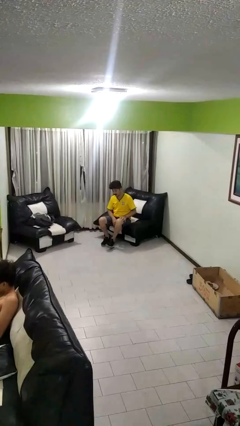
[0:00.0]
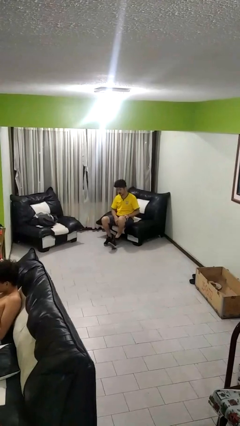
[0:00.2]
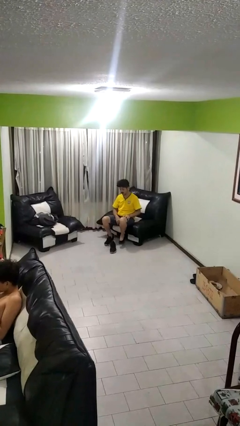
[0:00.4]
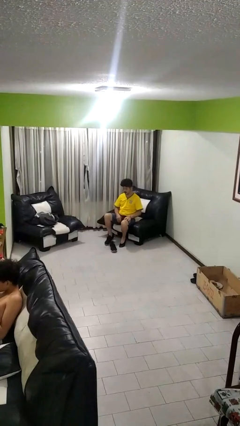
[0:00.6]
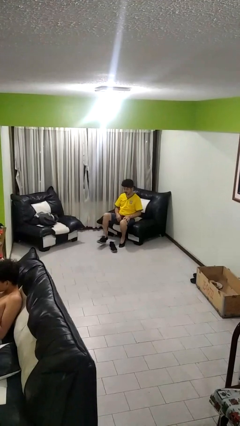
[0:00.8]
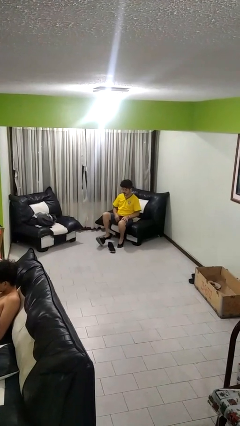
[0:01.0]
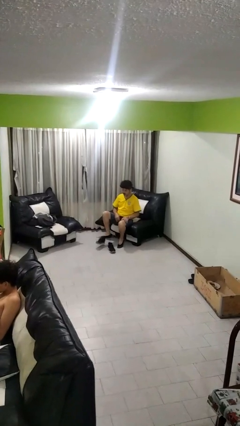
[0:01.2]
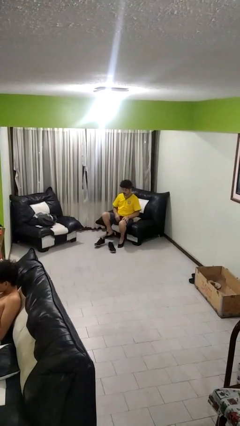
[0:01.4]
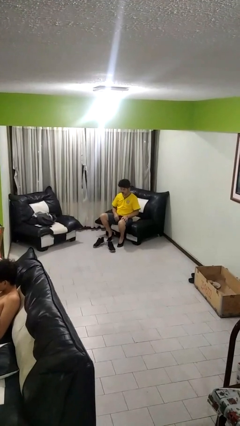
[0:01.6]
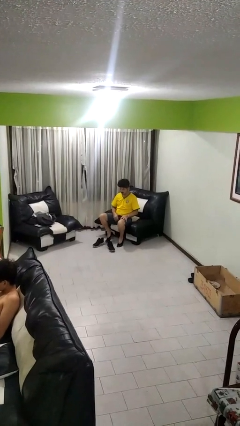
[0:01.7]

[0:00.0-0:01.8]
person takes off shoes

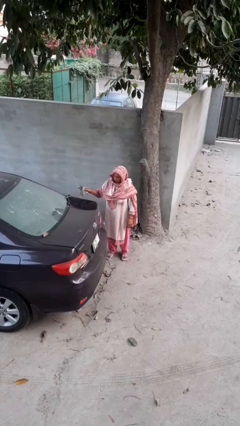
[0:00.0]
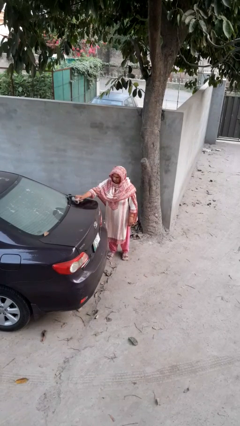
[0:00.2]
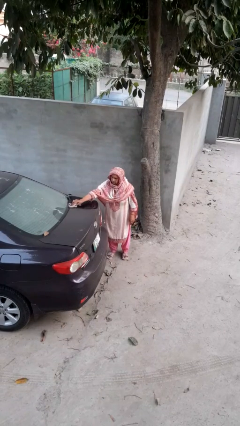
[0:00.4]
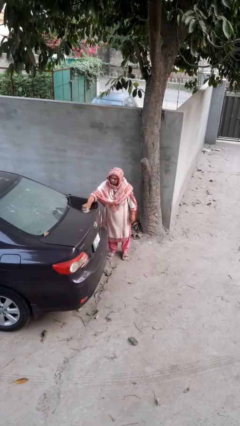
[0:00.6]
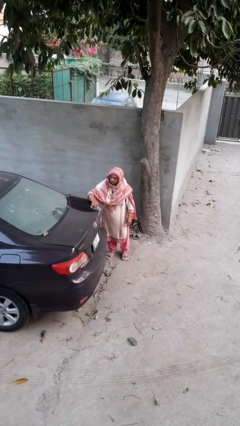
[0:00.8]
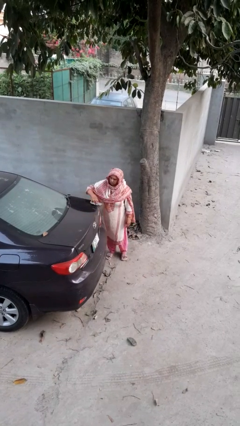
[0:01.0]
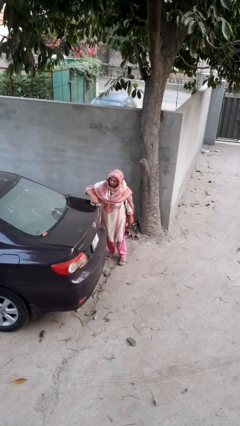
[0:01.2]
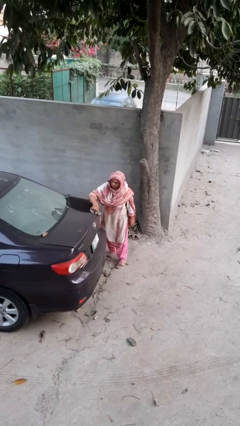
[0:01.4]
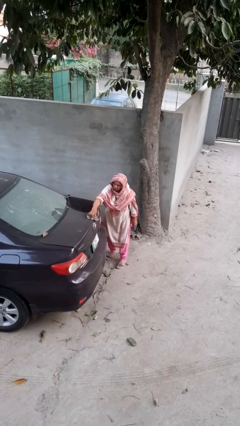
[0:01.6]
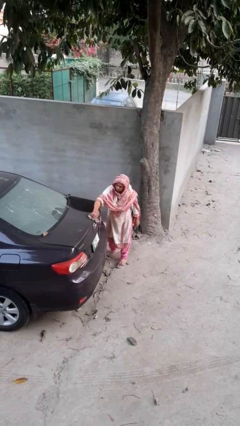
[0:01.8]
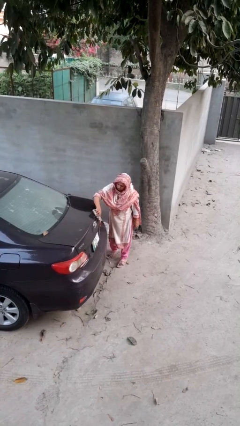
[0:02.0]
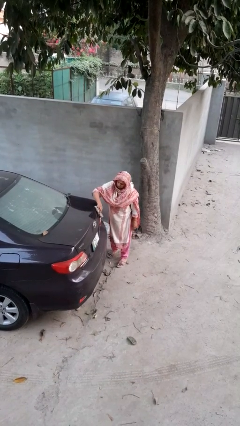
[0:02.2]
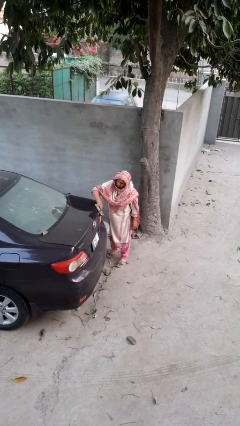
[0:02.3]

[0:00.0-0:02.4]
person polishes car with rag

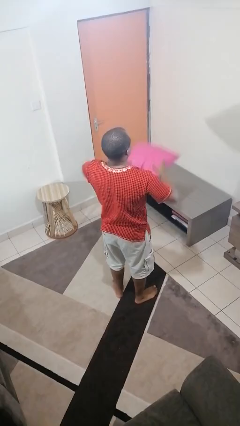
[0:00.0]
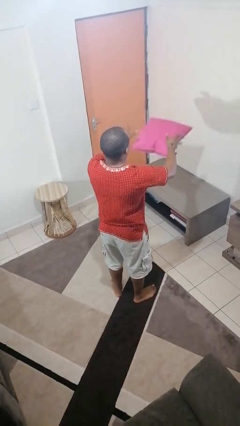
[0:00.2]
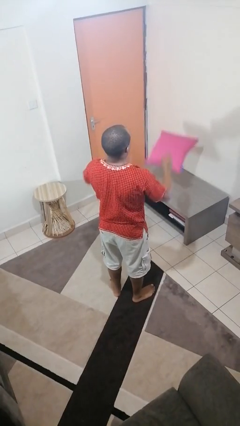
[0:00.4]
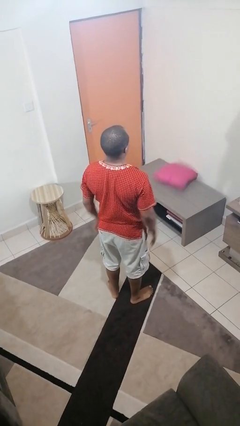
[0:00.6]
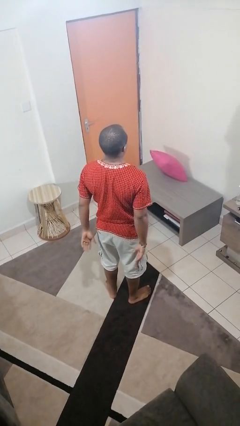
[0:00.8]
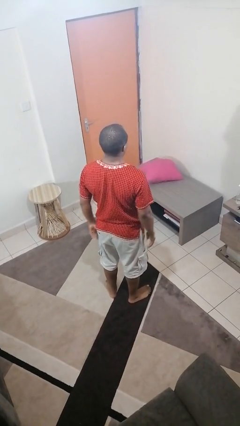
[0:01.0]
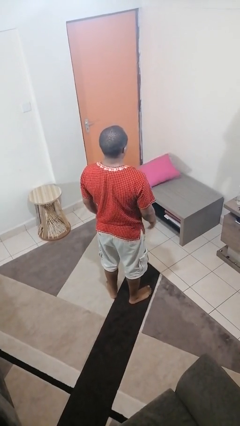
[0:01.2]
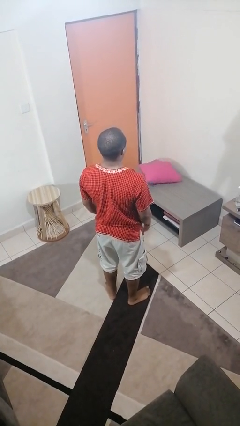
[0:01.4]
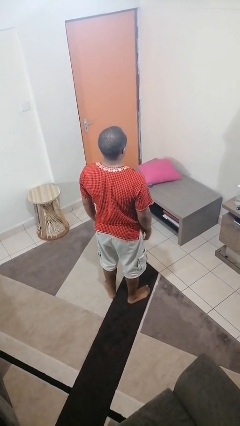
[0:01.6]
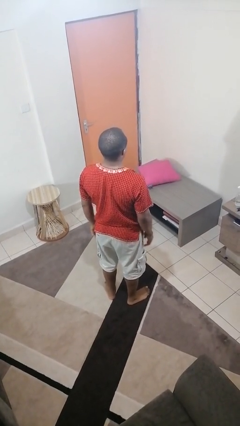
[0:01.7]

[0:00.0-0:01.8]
person throws object on table

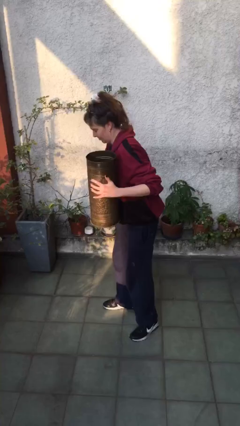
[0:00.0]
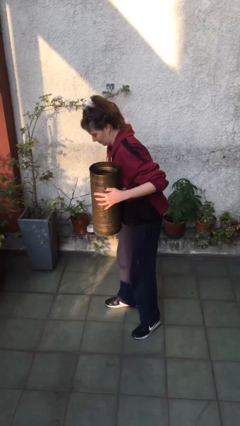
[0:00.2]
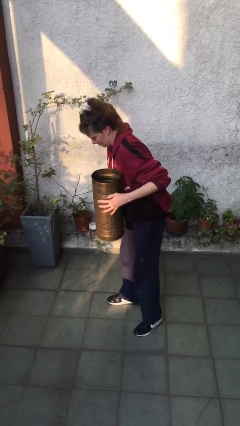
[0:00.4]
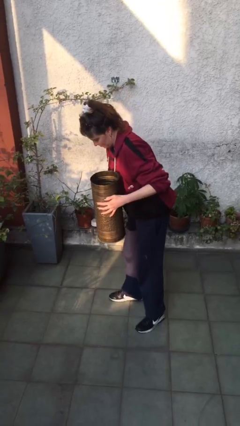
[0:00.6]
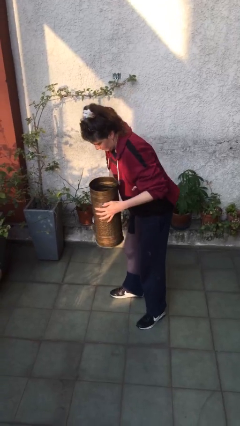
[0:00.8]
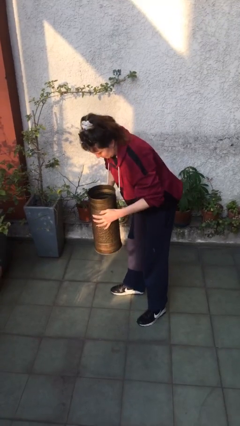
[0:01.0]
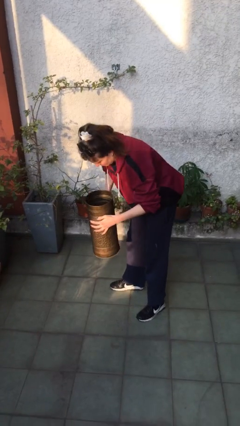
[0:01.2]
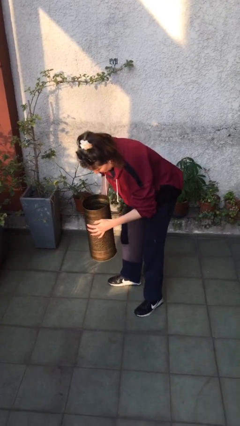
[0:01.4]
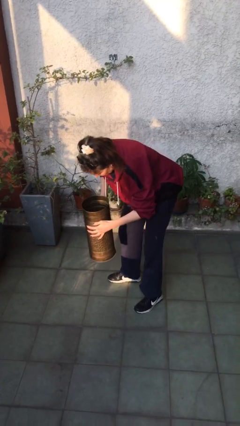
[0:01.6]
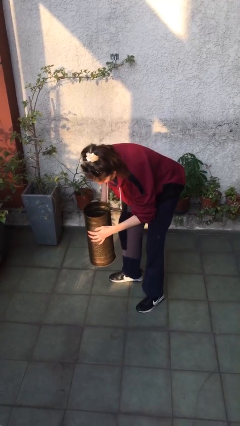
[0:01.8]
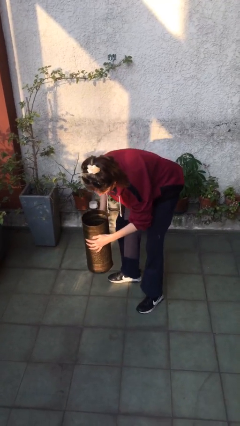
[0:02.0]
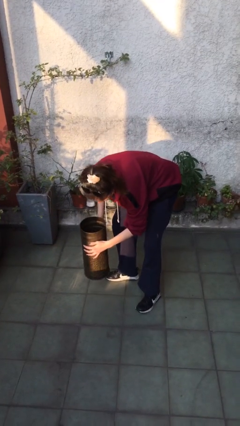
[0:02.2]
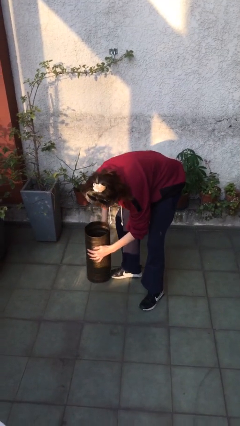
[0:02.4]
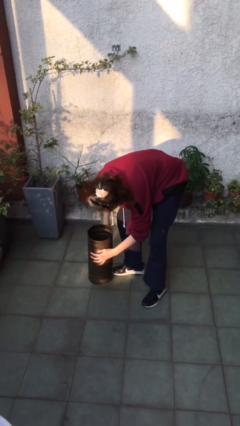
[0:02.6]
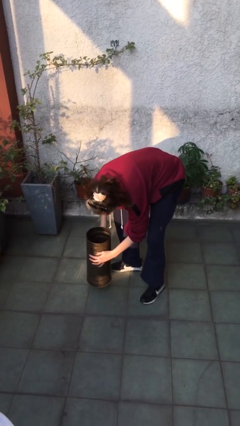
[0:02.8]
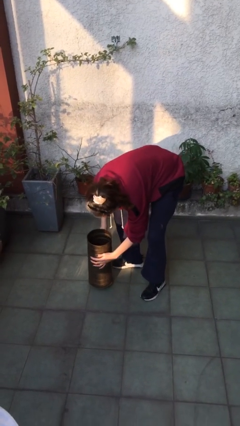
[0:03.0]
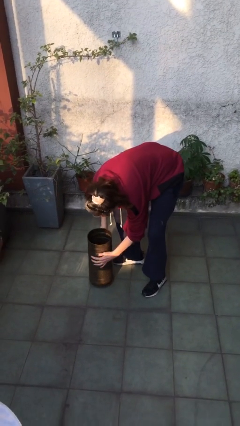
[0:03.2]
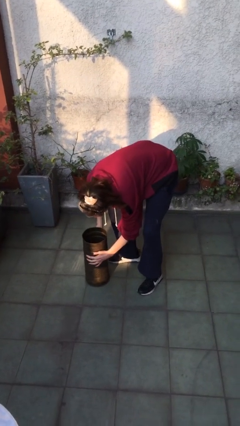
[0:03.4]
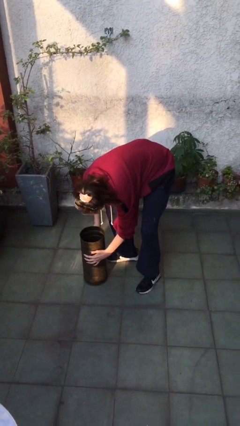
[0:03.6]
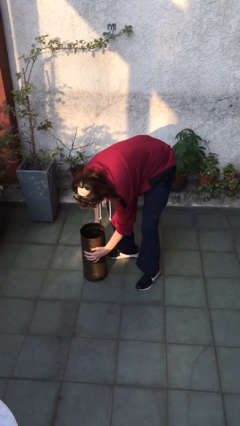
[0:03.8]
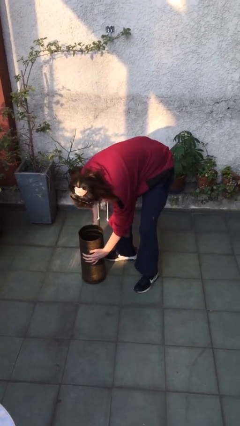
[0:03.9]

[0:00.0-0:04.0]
person puts down object on floor

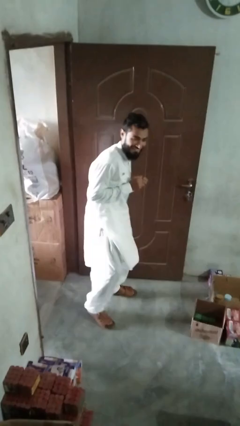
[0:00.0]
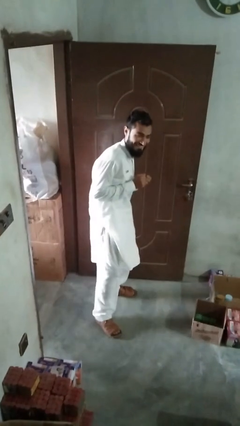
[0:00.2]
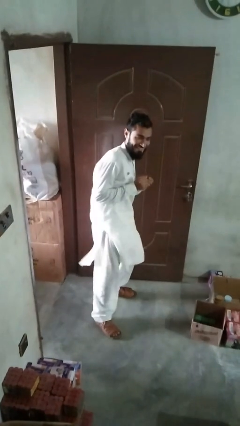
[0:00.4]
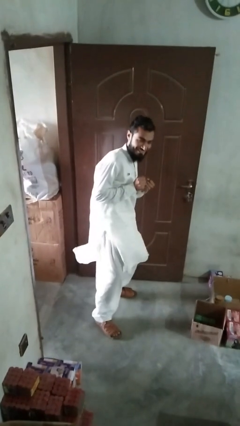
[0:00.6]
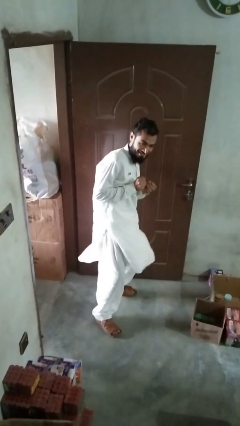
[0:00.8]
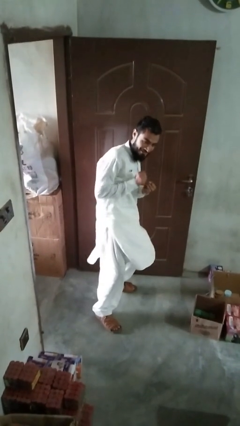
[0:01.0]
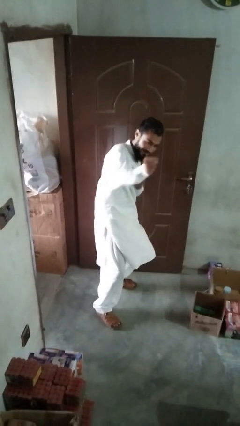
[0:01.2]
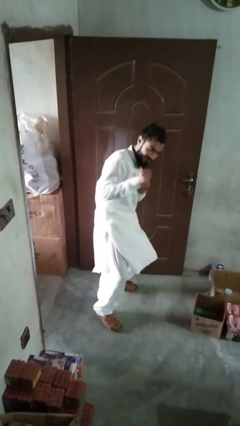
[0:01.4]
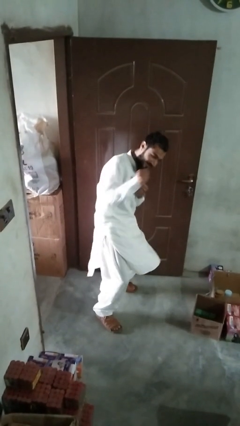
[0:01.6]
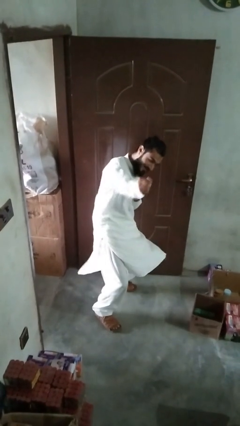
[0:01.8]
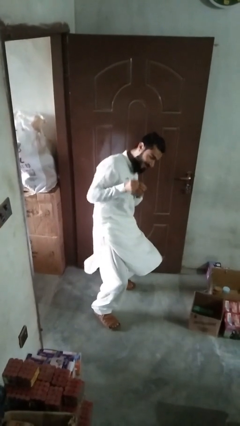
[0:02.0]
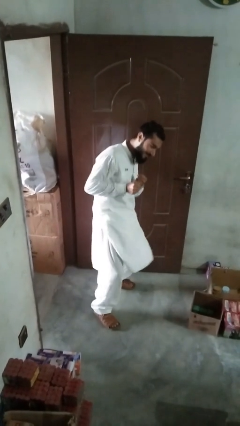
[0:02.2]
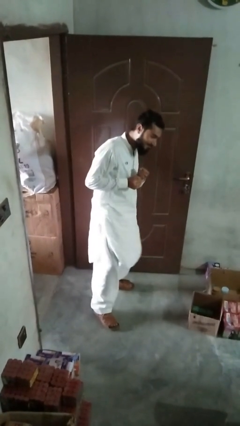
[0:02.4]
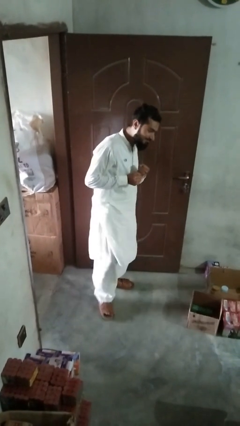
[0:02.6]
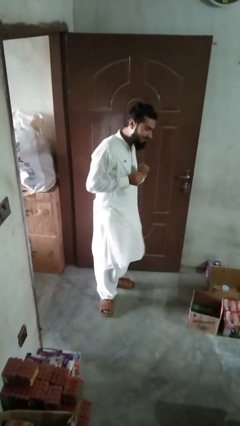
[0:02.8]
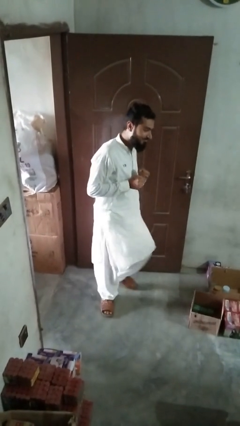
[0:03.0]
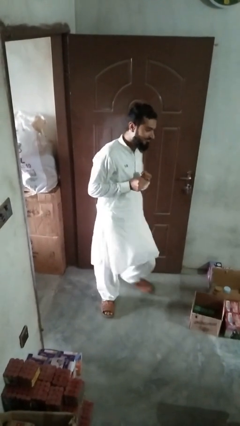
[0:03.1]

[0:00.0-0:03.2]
person karate chop

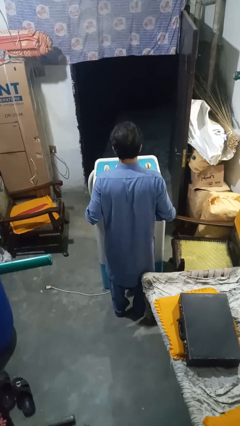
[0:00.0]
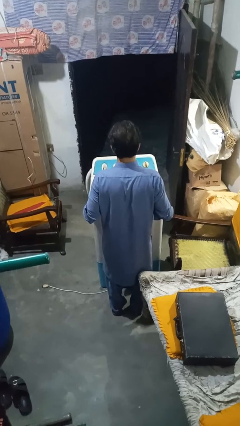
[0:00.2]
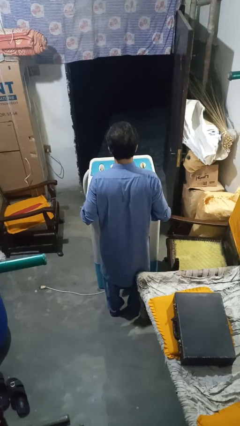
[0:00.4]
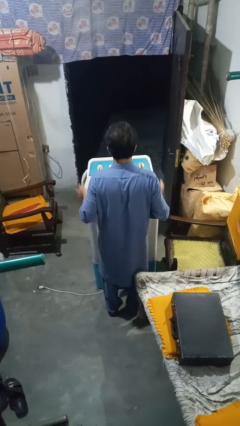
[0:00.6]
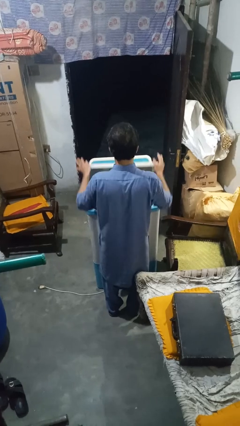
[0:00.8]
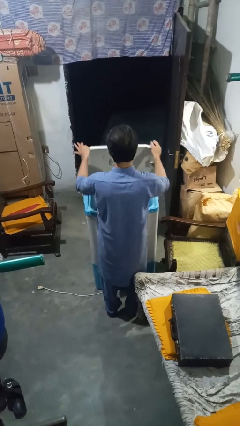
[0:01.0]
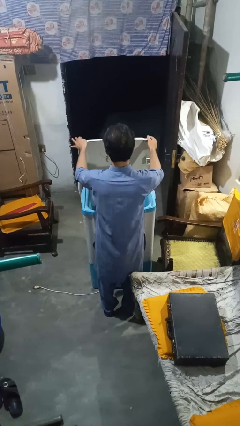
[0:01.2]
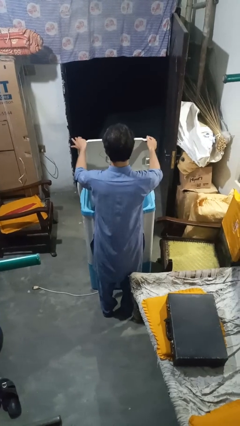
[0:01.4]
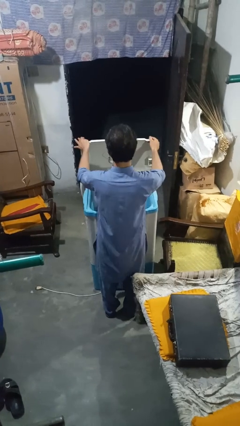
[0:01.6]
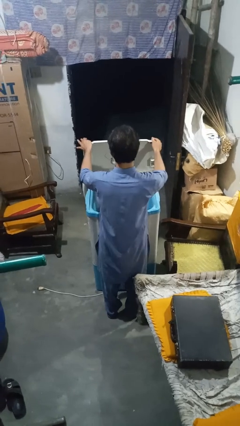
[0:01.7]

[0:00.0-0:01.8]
person opens clothes washer

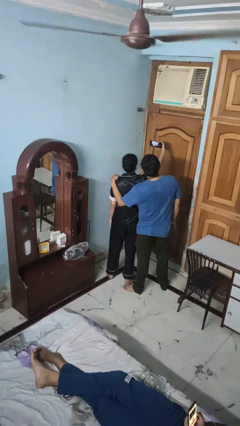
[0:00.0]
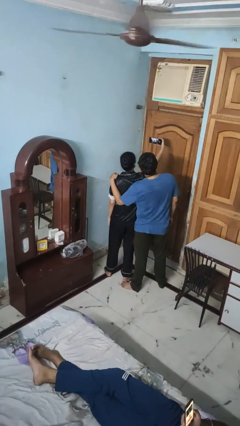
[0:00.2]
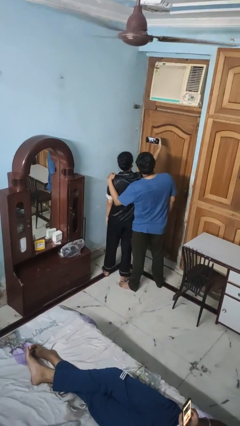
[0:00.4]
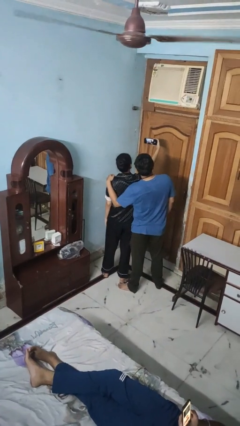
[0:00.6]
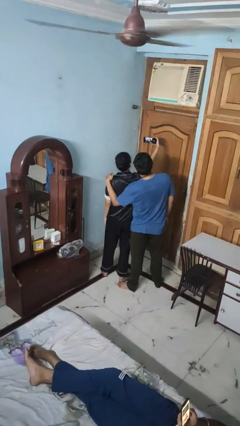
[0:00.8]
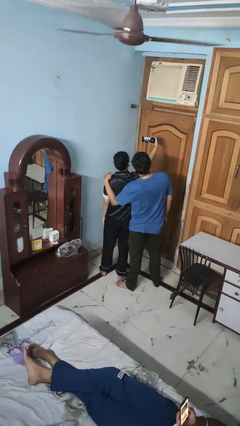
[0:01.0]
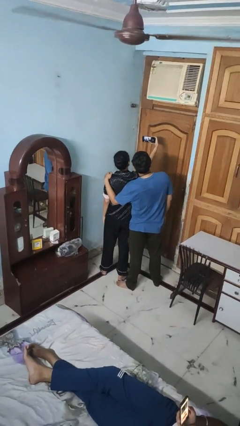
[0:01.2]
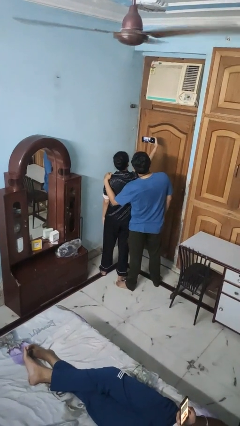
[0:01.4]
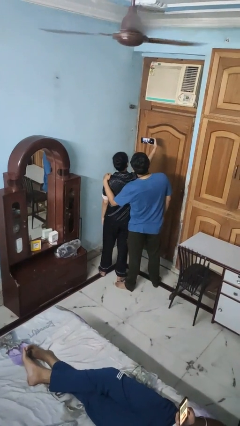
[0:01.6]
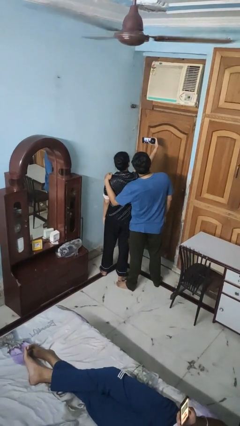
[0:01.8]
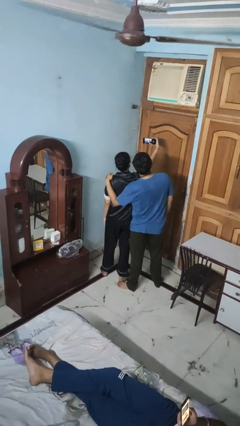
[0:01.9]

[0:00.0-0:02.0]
person takes selfie with person
